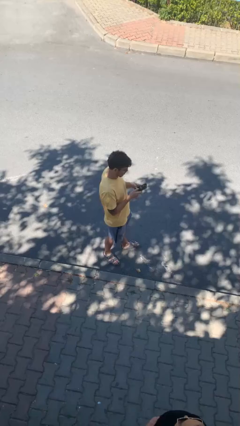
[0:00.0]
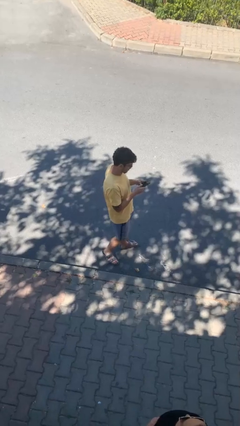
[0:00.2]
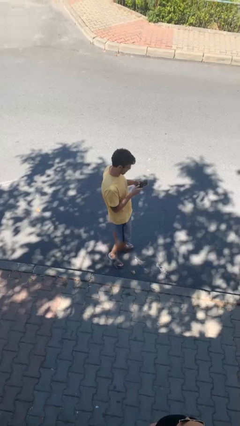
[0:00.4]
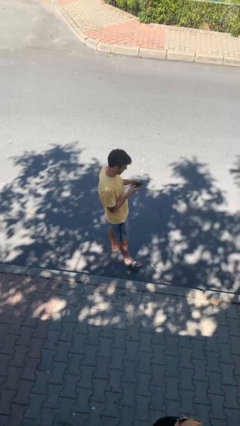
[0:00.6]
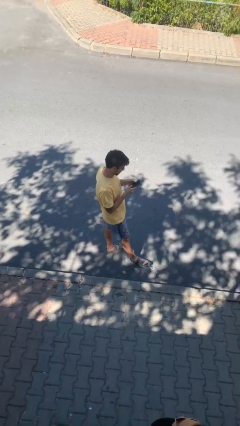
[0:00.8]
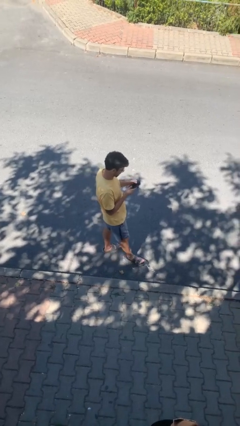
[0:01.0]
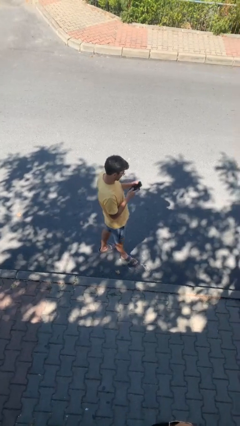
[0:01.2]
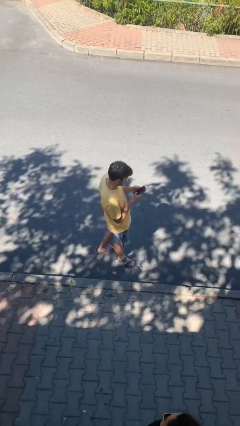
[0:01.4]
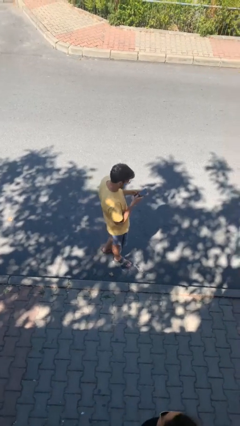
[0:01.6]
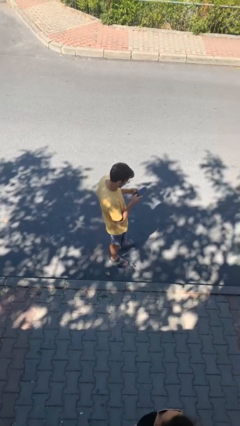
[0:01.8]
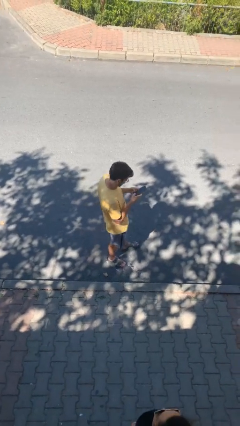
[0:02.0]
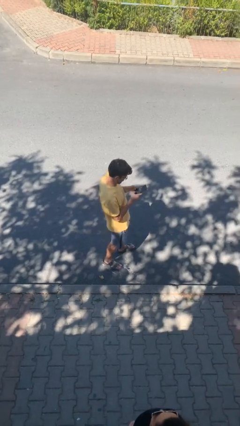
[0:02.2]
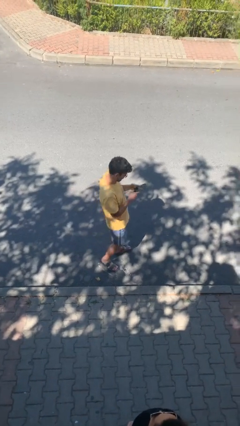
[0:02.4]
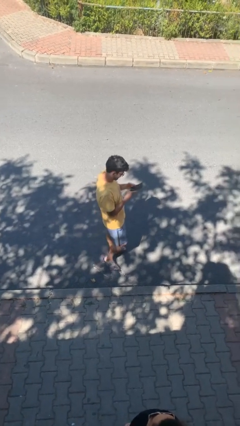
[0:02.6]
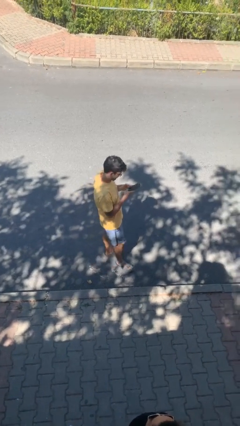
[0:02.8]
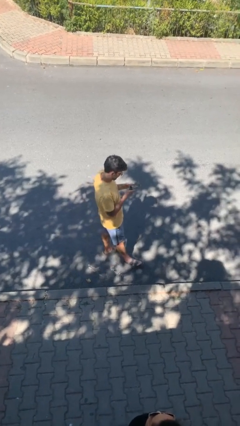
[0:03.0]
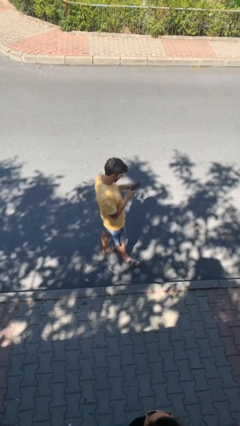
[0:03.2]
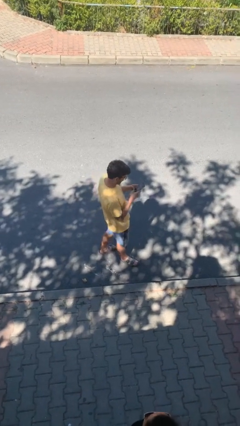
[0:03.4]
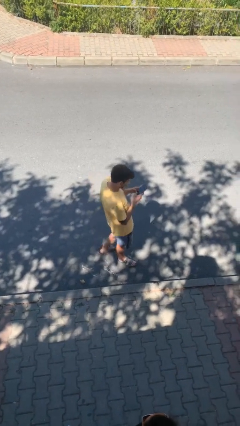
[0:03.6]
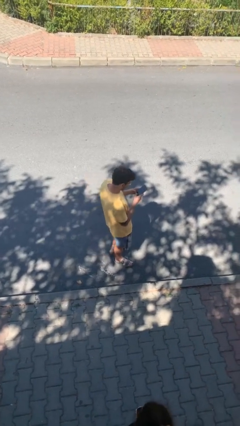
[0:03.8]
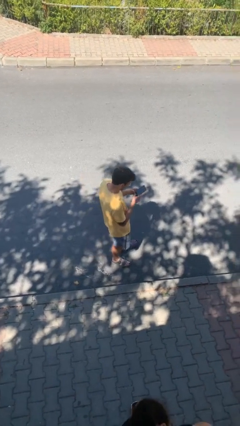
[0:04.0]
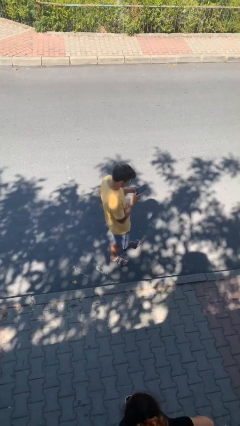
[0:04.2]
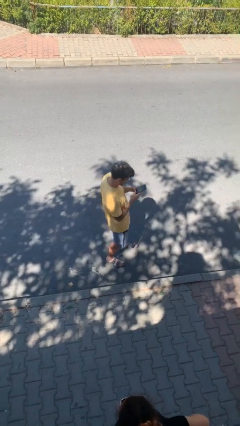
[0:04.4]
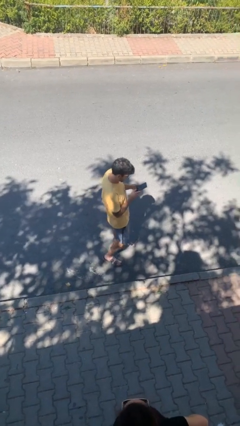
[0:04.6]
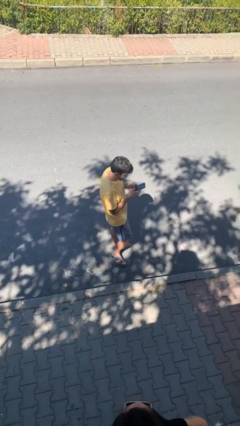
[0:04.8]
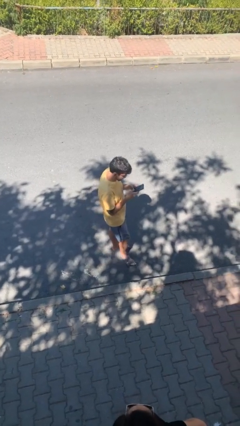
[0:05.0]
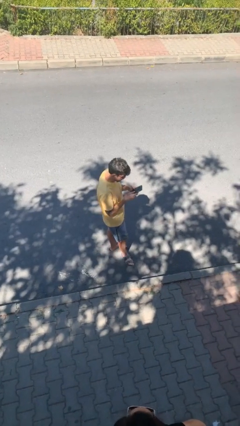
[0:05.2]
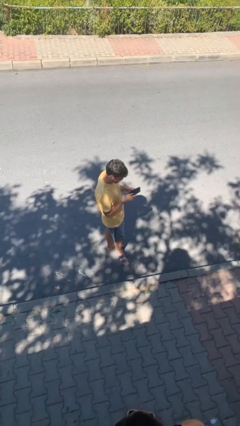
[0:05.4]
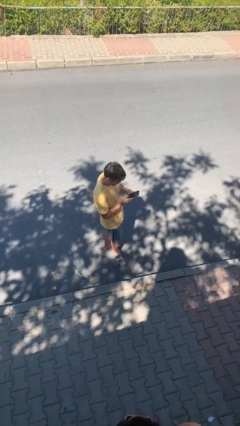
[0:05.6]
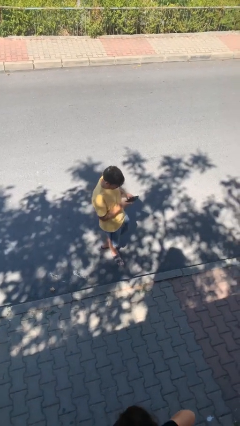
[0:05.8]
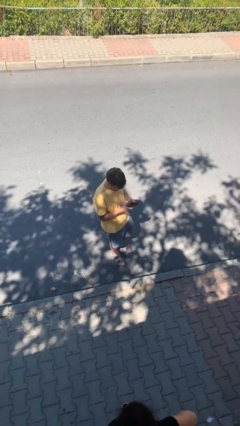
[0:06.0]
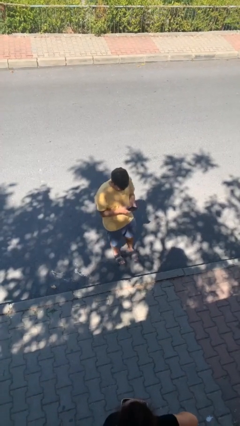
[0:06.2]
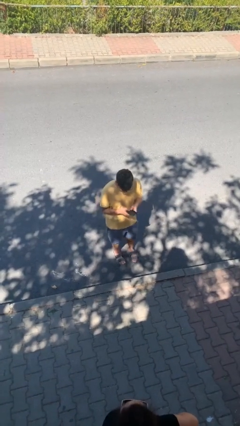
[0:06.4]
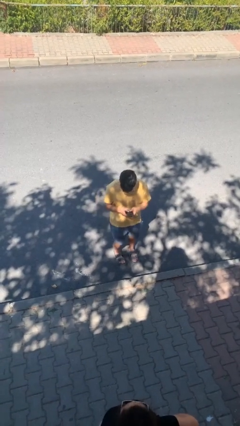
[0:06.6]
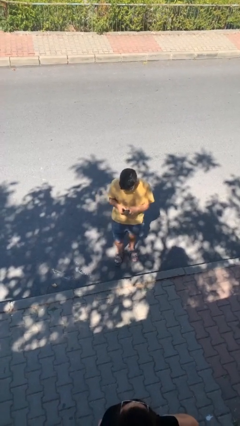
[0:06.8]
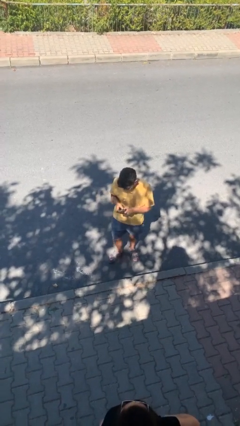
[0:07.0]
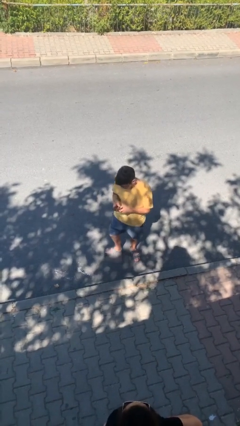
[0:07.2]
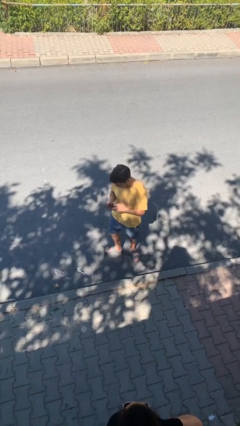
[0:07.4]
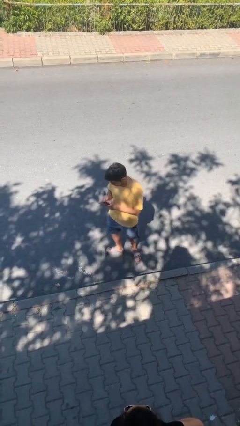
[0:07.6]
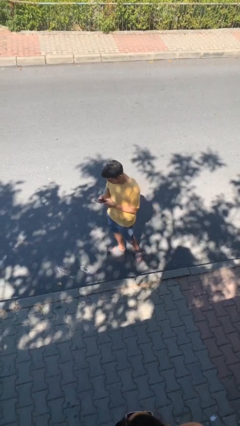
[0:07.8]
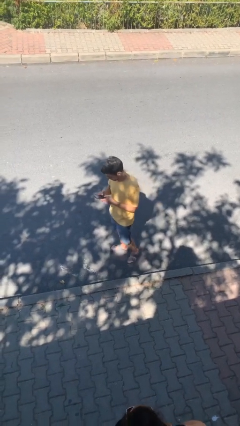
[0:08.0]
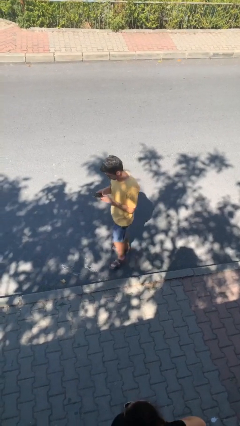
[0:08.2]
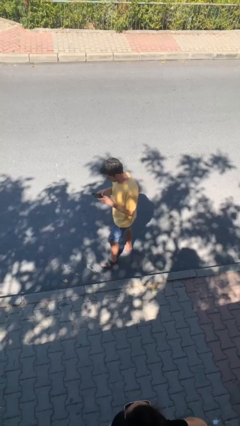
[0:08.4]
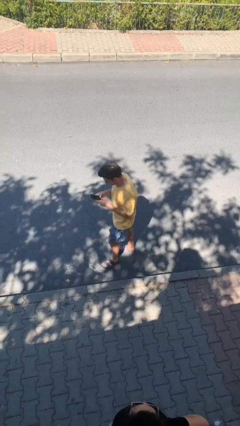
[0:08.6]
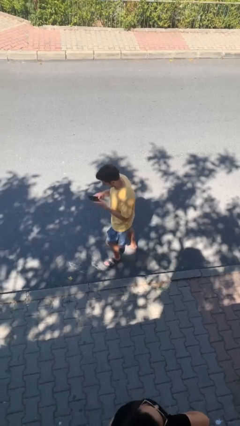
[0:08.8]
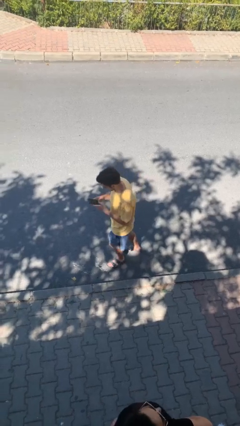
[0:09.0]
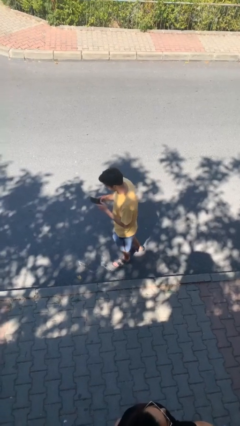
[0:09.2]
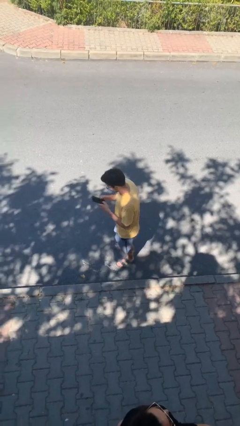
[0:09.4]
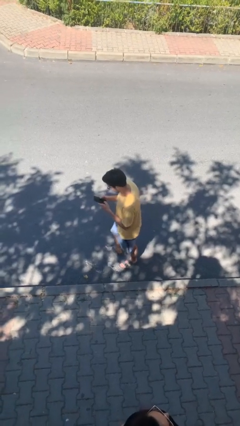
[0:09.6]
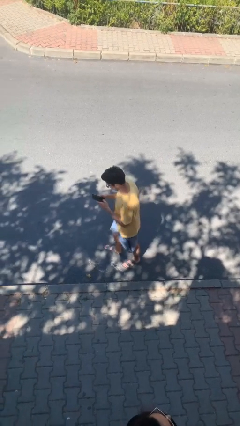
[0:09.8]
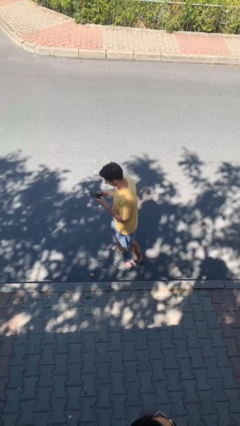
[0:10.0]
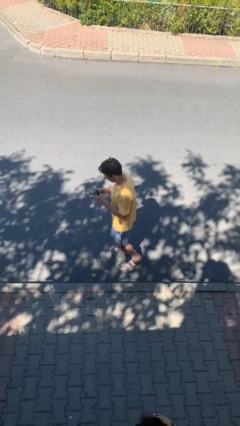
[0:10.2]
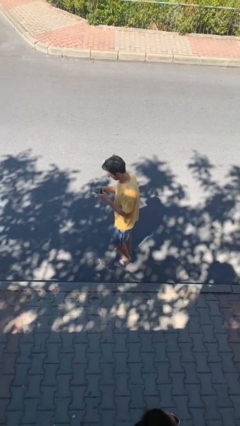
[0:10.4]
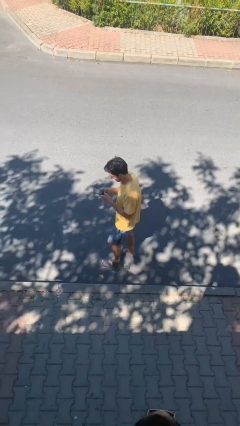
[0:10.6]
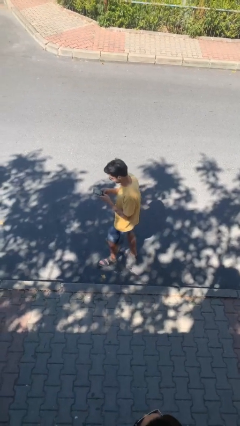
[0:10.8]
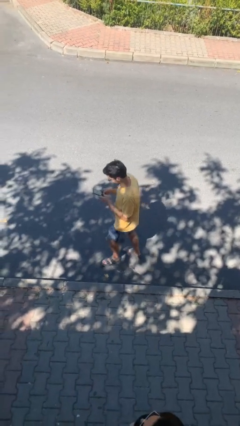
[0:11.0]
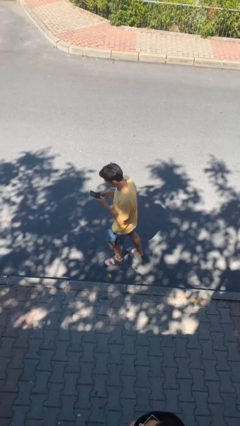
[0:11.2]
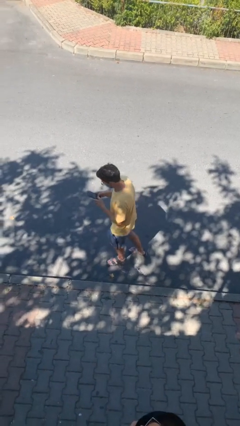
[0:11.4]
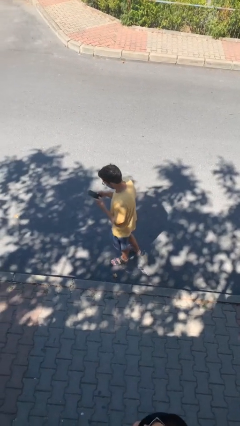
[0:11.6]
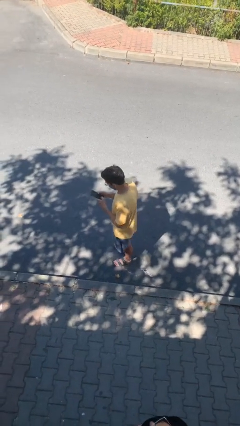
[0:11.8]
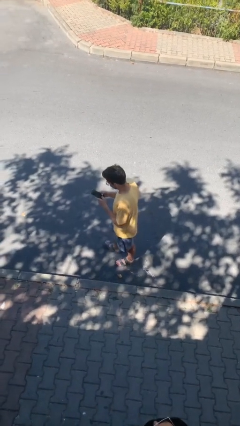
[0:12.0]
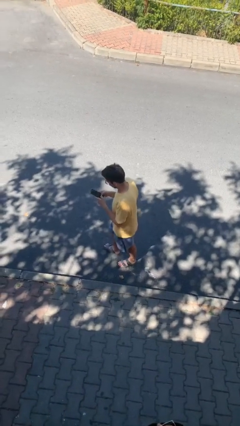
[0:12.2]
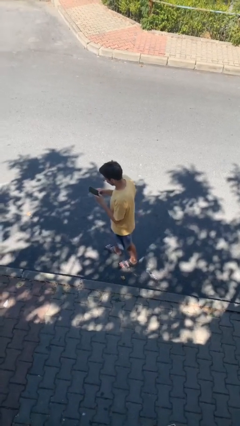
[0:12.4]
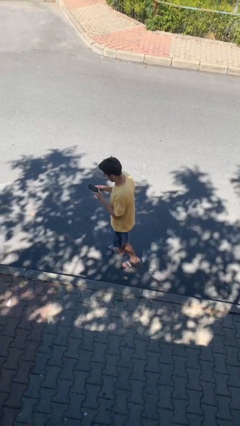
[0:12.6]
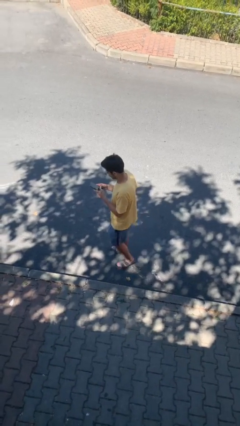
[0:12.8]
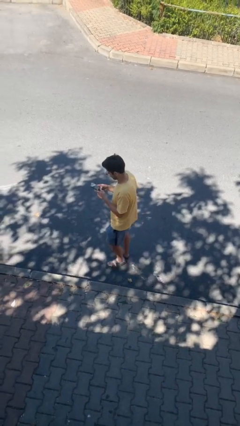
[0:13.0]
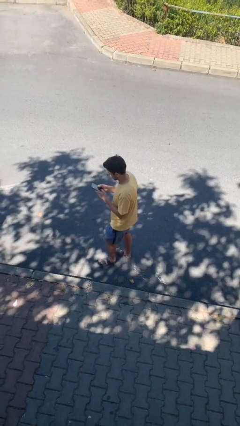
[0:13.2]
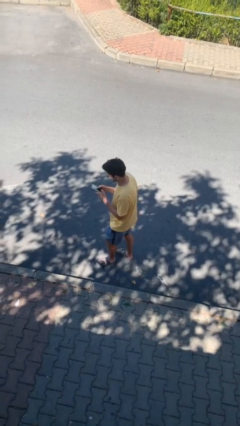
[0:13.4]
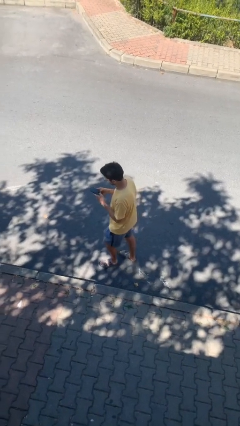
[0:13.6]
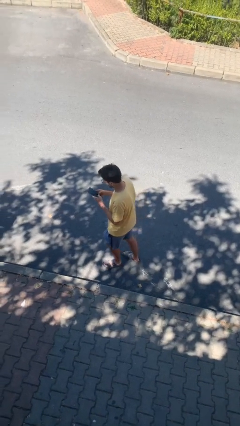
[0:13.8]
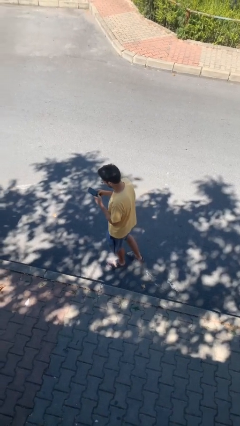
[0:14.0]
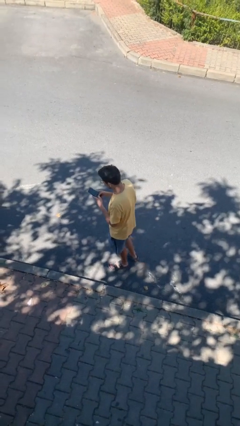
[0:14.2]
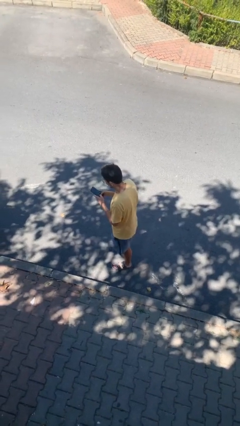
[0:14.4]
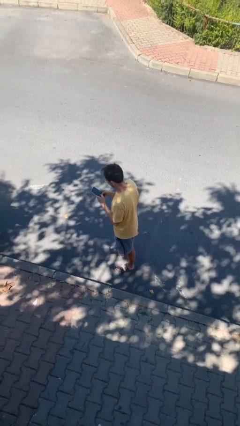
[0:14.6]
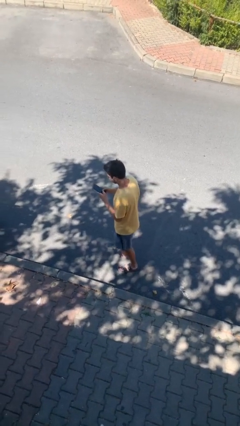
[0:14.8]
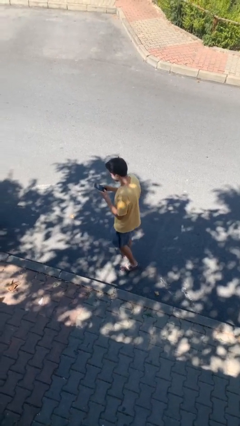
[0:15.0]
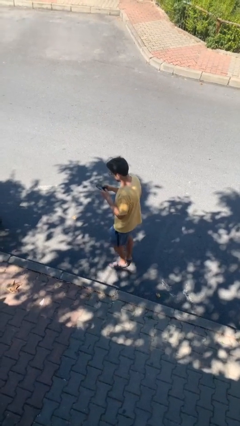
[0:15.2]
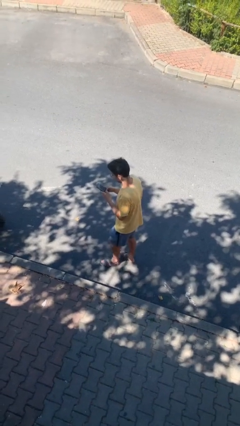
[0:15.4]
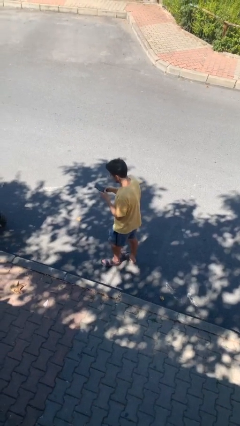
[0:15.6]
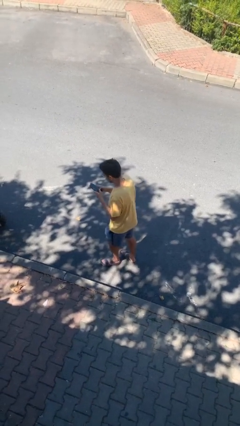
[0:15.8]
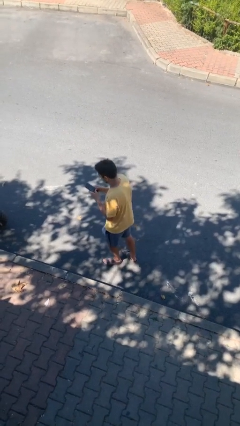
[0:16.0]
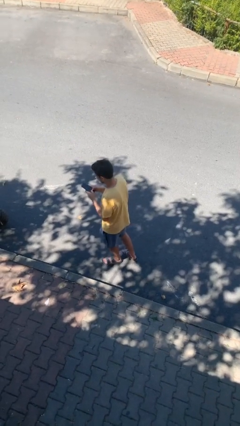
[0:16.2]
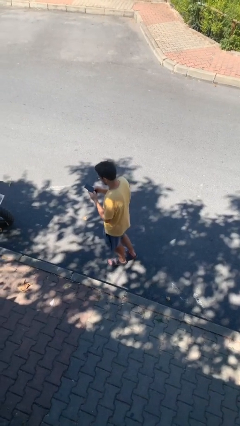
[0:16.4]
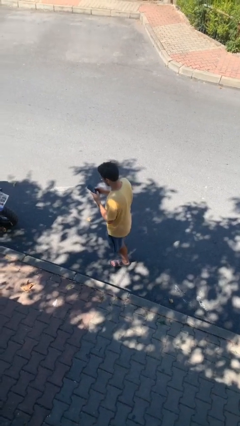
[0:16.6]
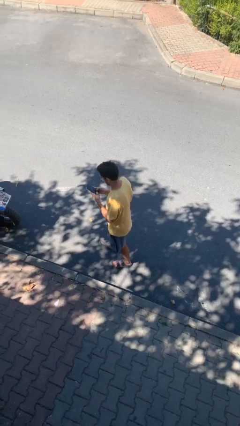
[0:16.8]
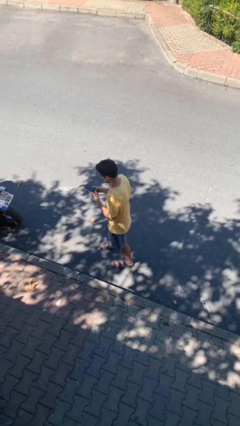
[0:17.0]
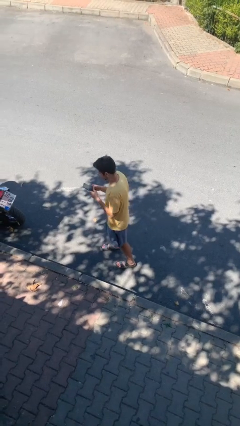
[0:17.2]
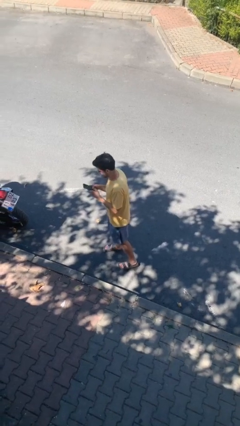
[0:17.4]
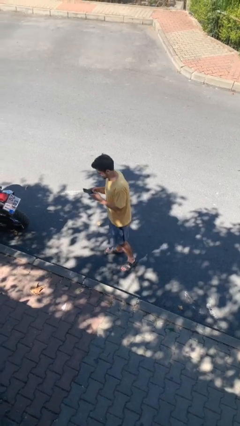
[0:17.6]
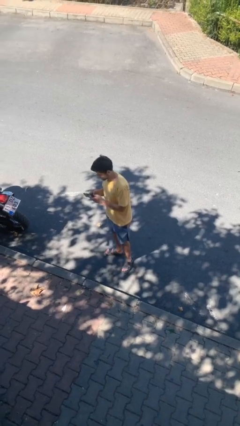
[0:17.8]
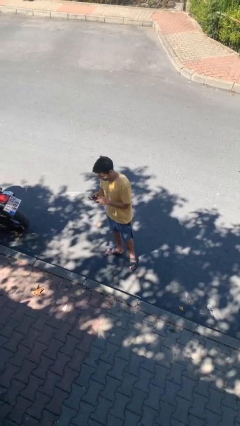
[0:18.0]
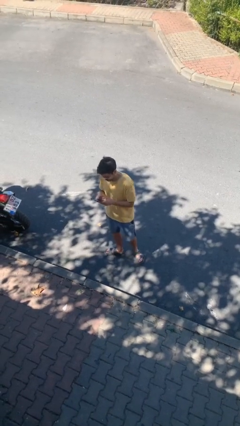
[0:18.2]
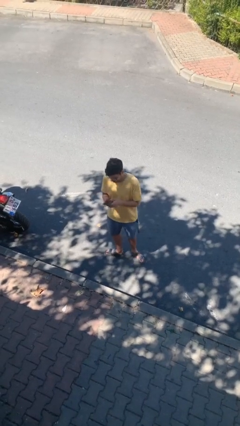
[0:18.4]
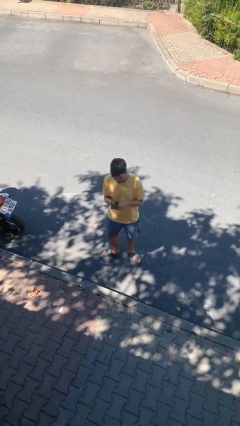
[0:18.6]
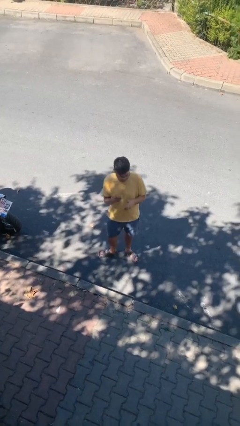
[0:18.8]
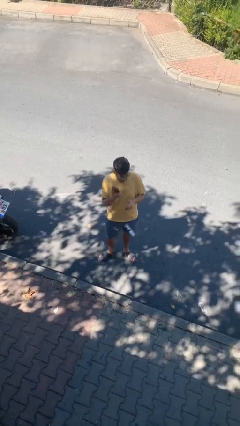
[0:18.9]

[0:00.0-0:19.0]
person texts on phone
